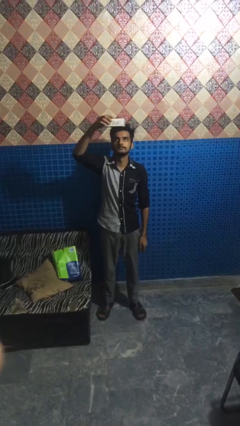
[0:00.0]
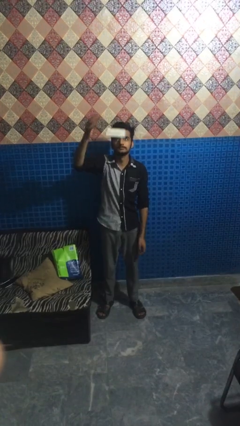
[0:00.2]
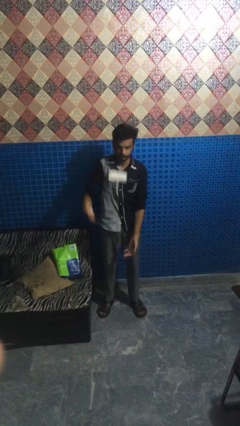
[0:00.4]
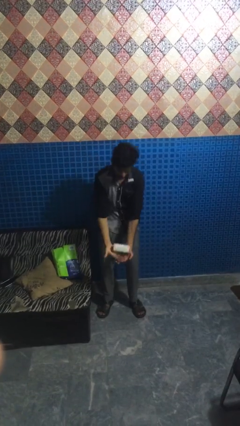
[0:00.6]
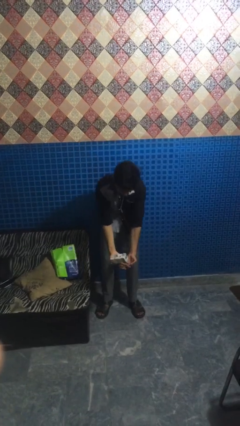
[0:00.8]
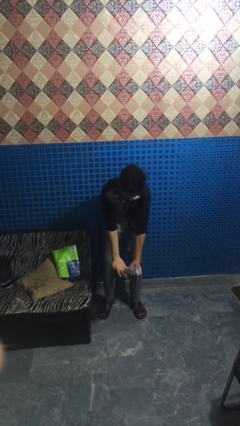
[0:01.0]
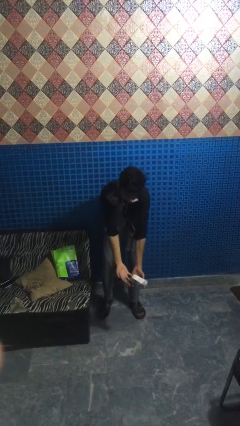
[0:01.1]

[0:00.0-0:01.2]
person drops object

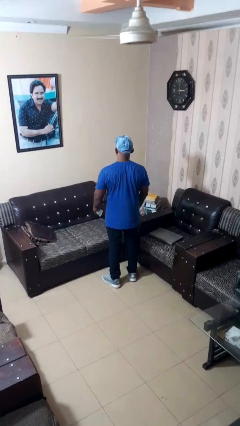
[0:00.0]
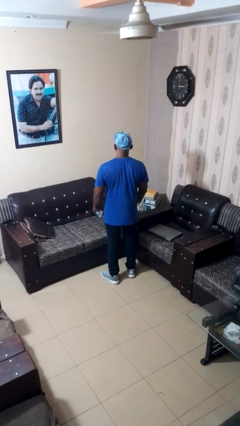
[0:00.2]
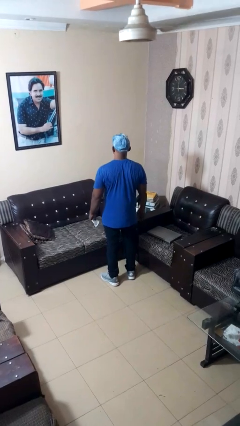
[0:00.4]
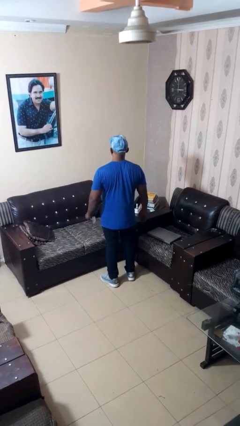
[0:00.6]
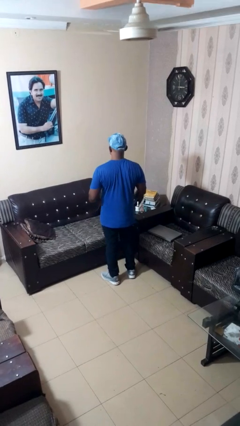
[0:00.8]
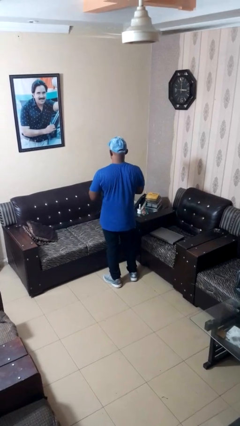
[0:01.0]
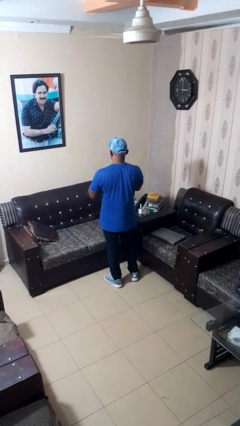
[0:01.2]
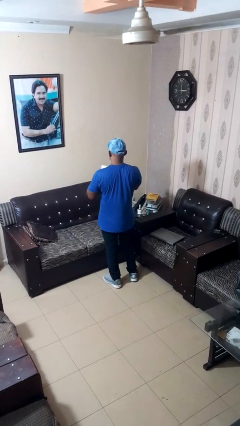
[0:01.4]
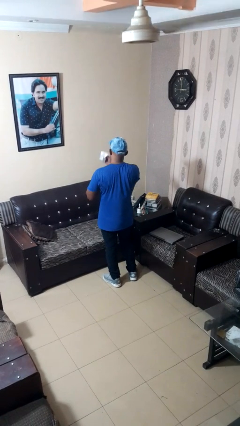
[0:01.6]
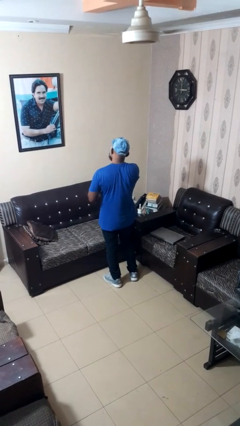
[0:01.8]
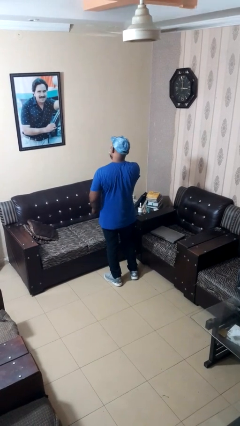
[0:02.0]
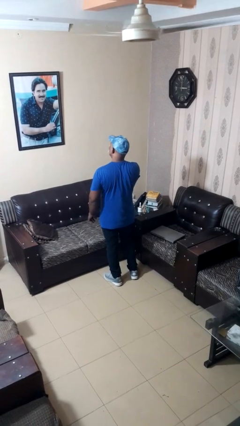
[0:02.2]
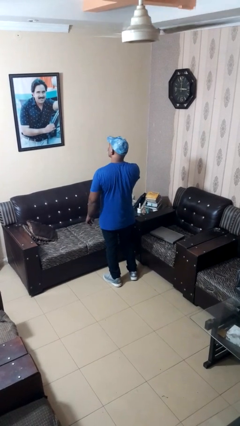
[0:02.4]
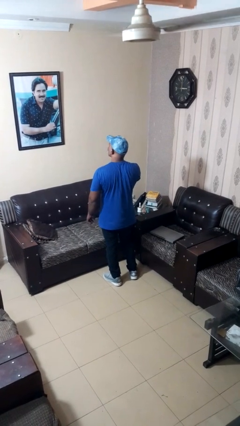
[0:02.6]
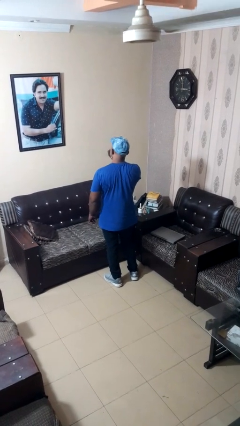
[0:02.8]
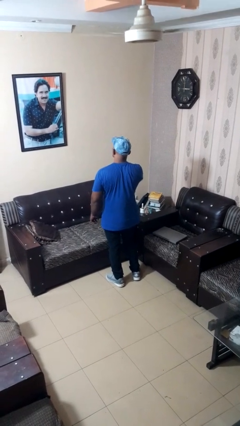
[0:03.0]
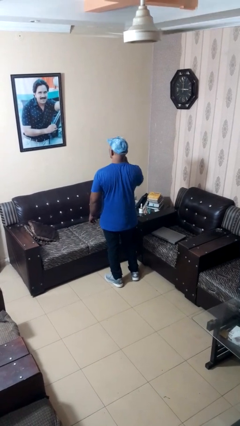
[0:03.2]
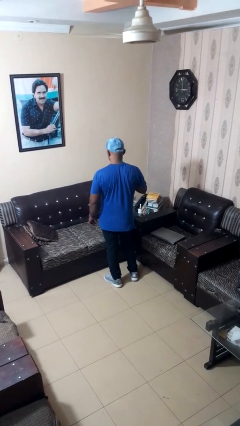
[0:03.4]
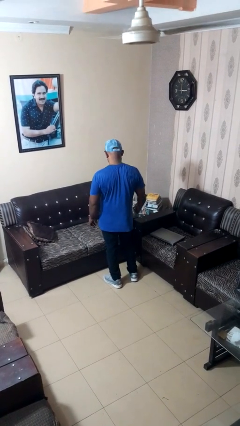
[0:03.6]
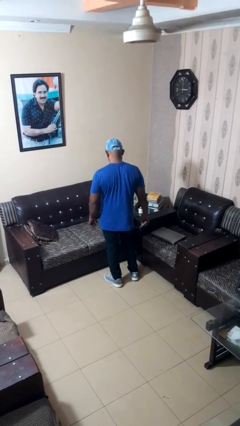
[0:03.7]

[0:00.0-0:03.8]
person wipes mouth with napkin

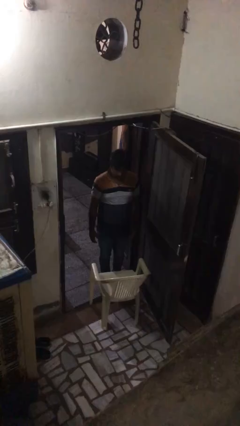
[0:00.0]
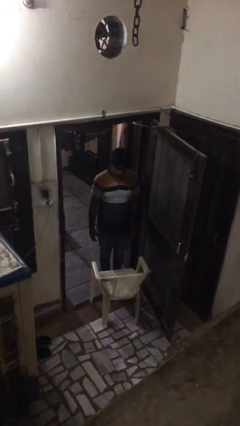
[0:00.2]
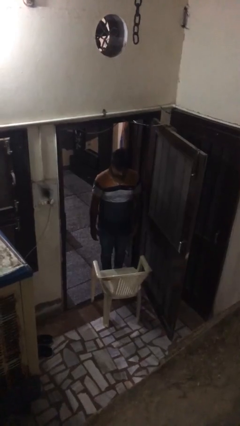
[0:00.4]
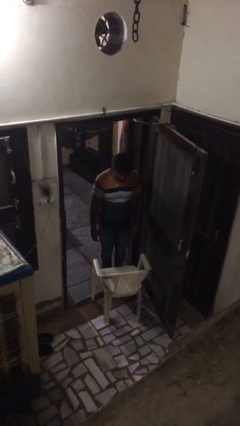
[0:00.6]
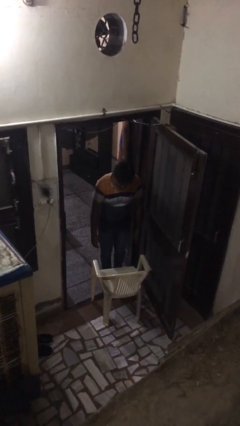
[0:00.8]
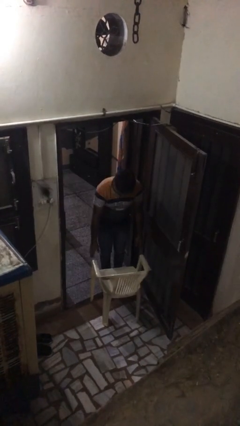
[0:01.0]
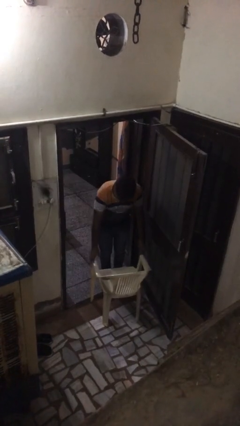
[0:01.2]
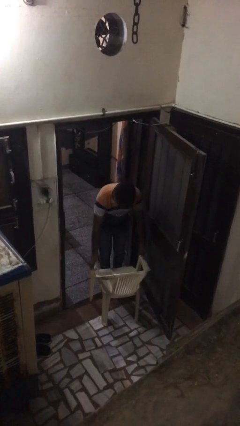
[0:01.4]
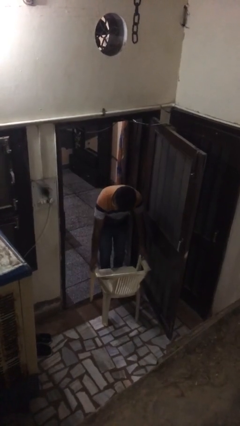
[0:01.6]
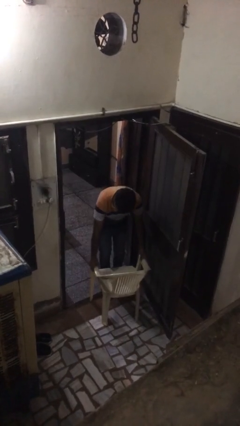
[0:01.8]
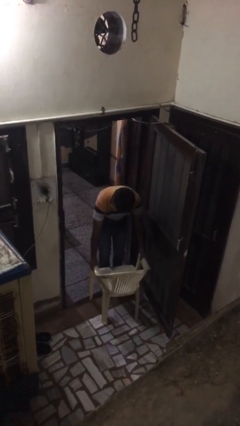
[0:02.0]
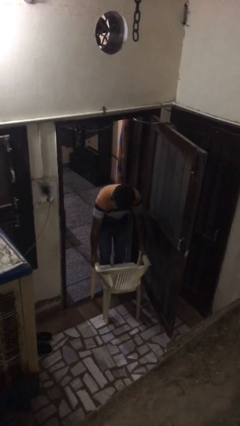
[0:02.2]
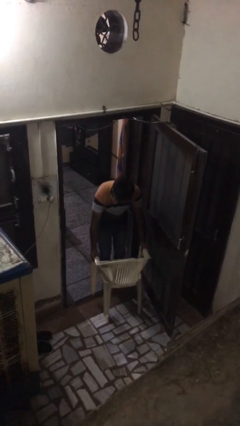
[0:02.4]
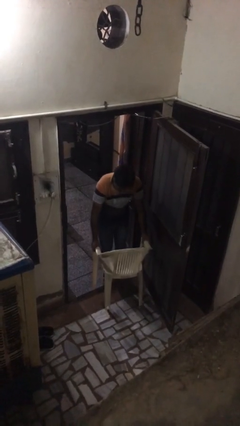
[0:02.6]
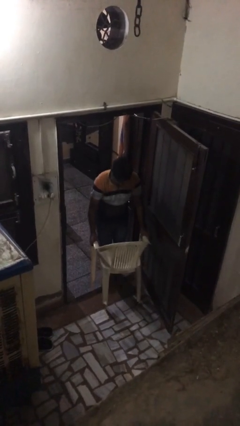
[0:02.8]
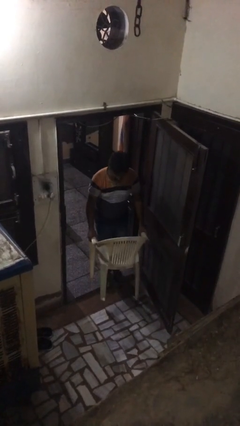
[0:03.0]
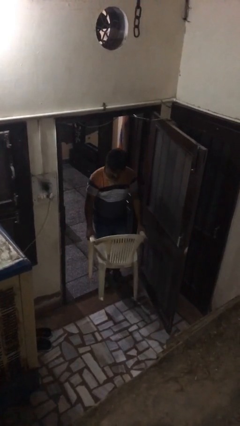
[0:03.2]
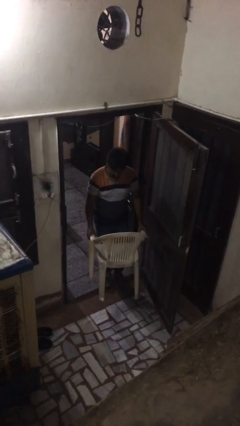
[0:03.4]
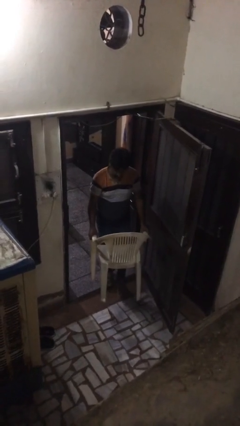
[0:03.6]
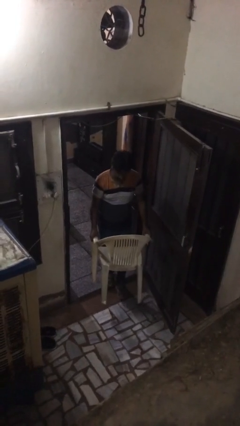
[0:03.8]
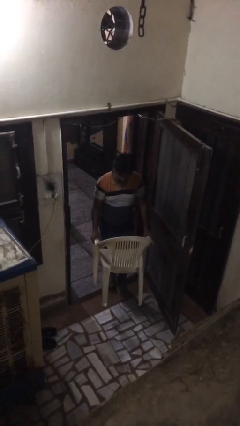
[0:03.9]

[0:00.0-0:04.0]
person picks up object from floor

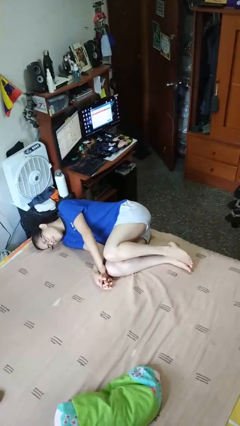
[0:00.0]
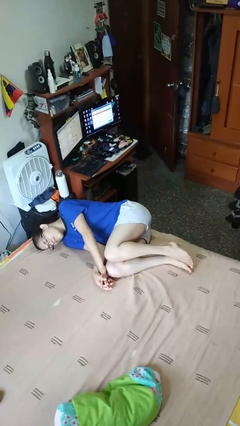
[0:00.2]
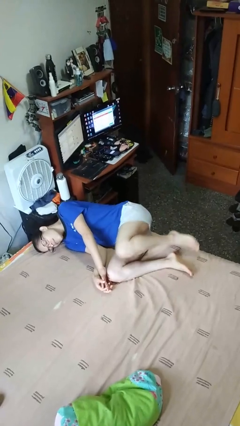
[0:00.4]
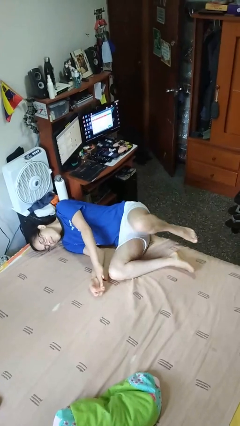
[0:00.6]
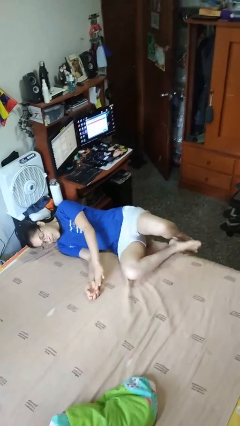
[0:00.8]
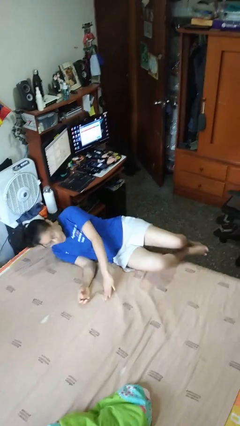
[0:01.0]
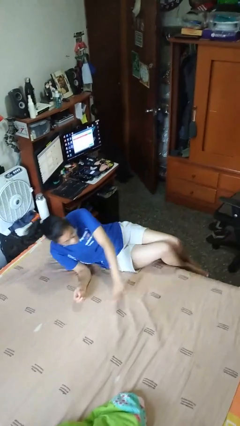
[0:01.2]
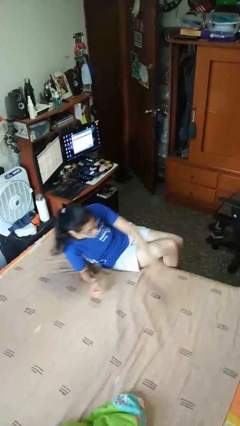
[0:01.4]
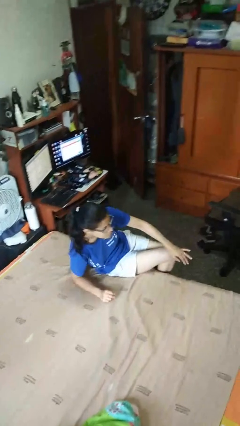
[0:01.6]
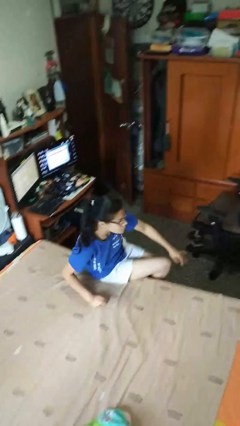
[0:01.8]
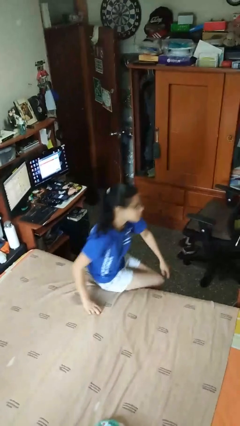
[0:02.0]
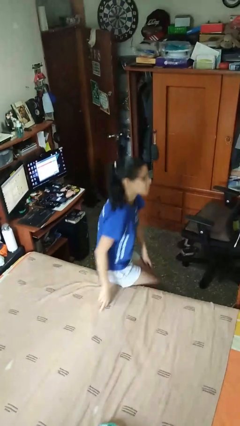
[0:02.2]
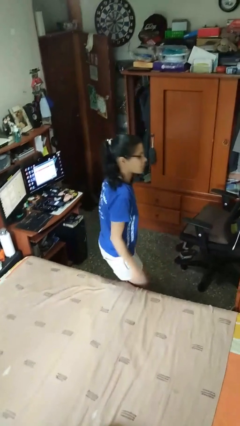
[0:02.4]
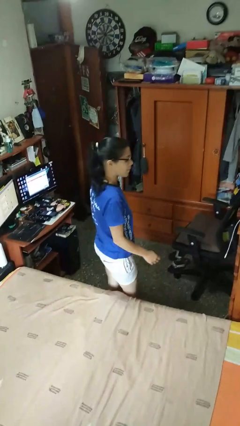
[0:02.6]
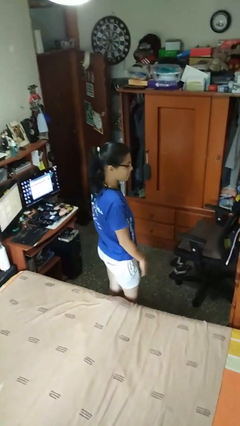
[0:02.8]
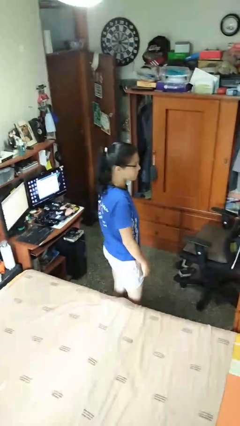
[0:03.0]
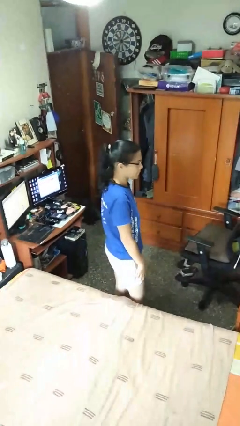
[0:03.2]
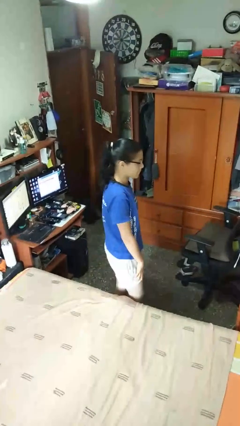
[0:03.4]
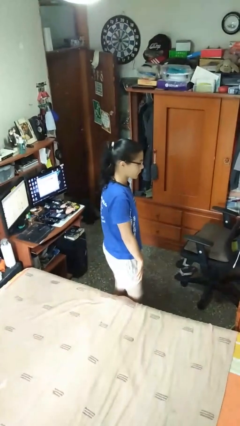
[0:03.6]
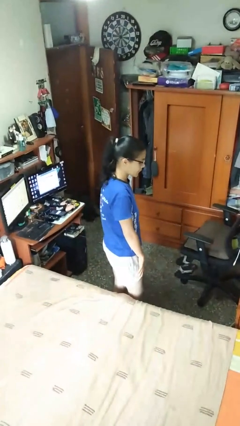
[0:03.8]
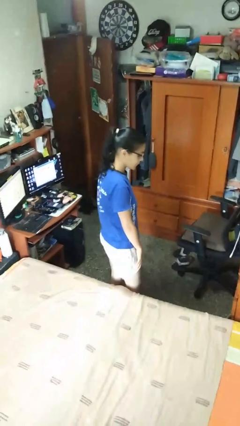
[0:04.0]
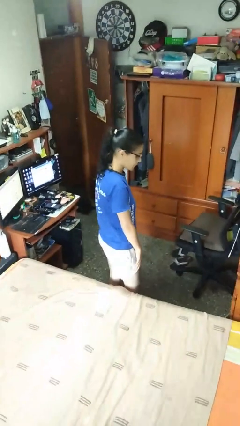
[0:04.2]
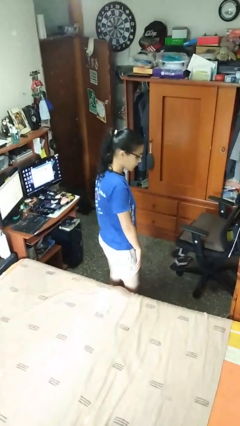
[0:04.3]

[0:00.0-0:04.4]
person stands up

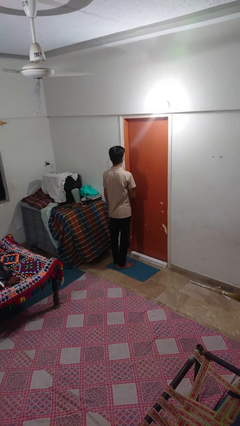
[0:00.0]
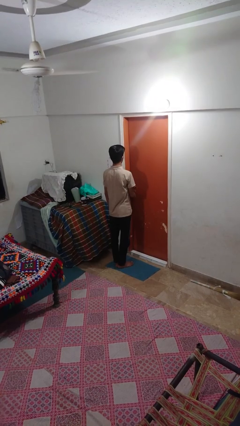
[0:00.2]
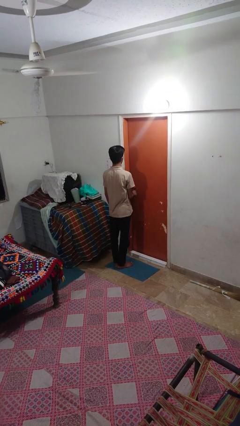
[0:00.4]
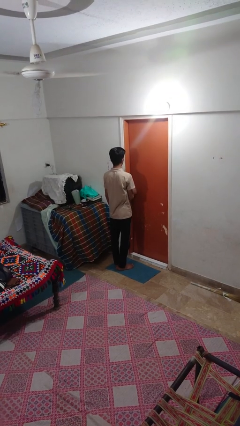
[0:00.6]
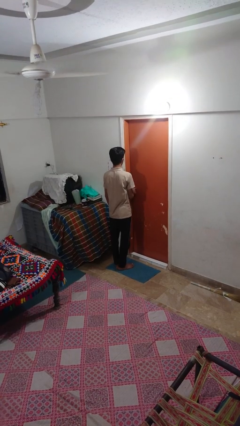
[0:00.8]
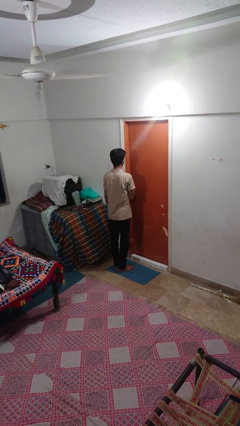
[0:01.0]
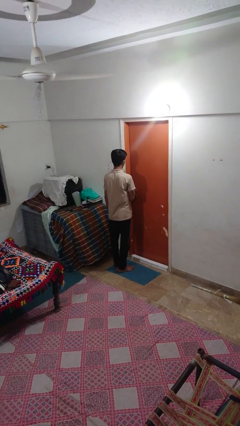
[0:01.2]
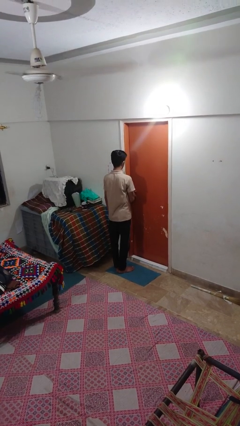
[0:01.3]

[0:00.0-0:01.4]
person locks door with keys

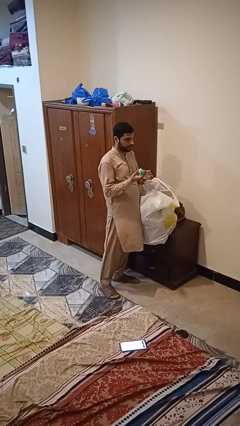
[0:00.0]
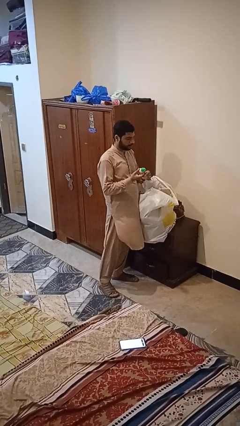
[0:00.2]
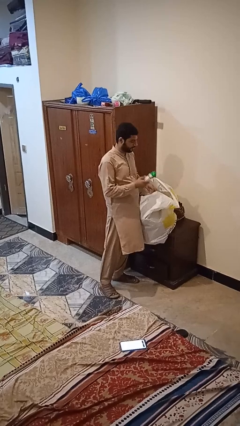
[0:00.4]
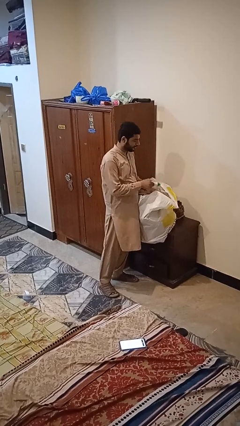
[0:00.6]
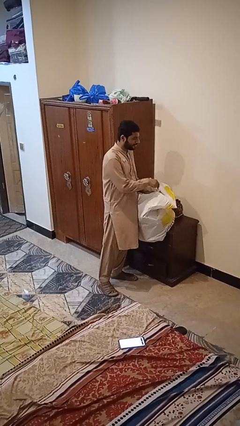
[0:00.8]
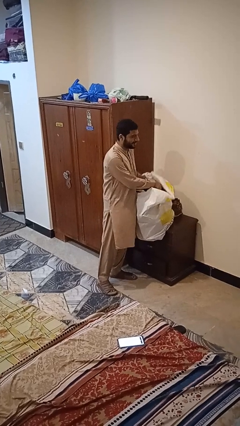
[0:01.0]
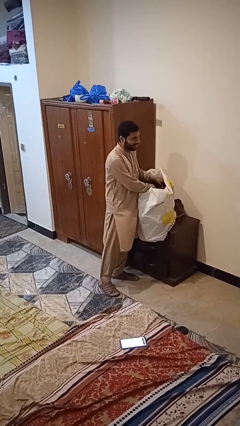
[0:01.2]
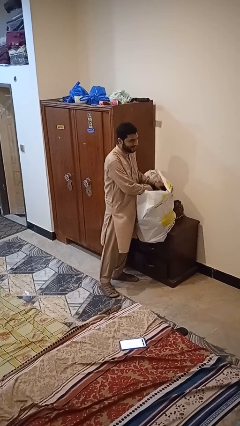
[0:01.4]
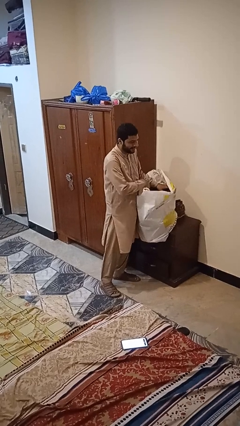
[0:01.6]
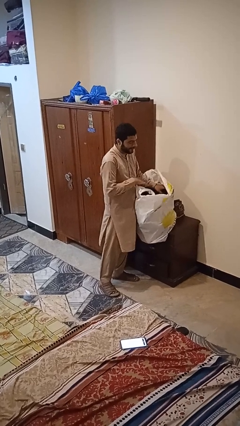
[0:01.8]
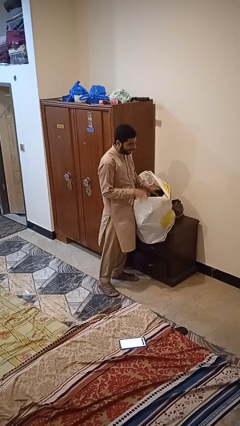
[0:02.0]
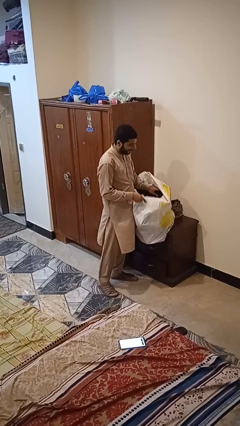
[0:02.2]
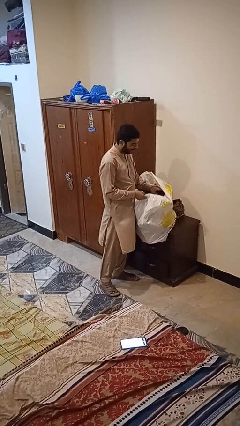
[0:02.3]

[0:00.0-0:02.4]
person puts object into bag
